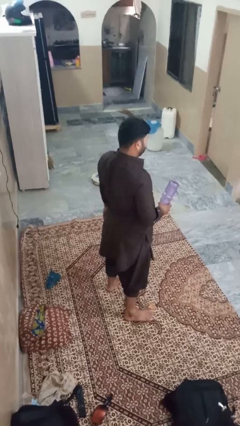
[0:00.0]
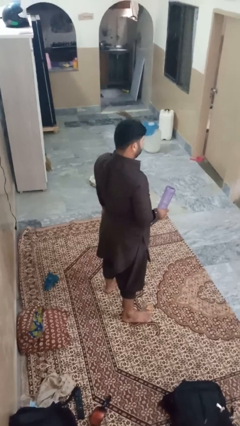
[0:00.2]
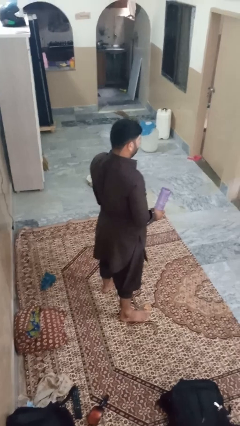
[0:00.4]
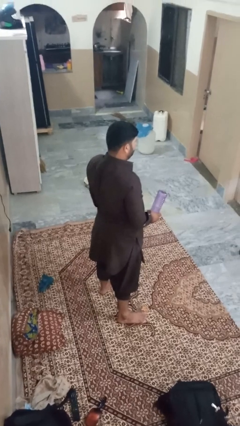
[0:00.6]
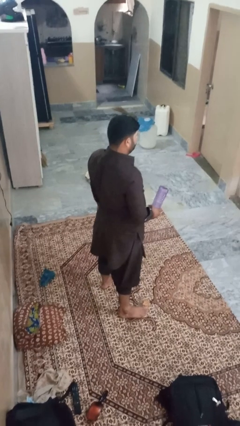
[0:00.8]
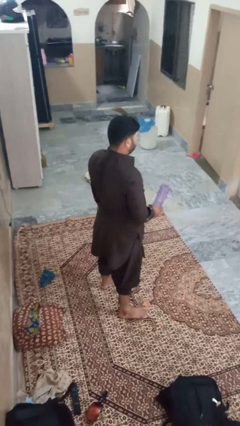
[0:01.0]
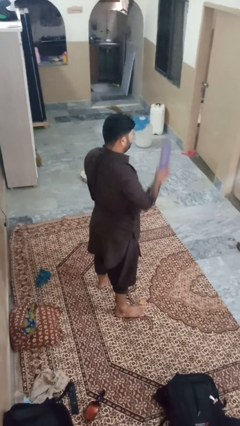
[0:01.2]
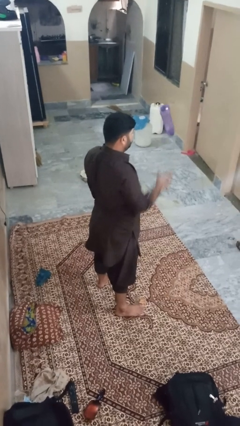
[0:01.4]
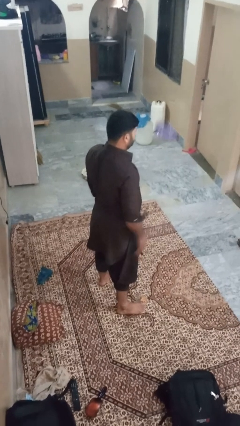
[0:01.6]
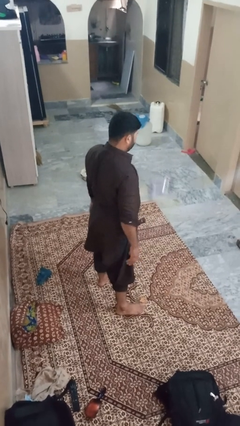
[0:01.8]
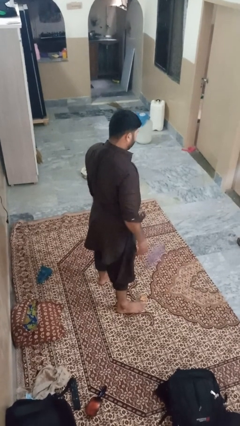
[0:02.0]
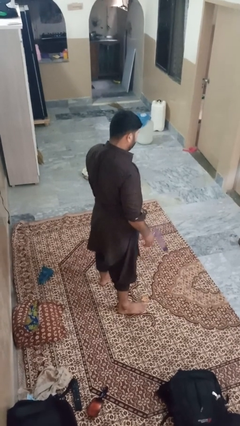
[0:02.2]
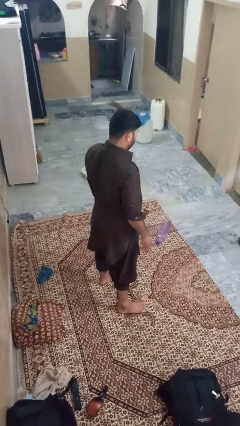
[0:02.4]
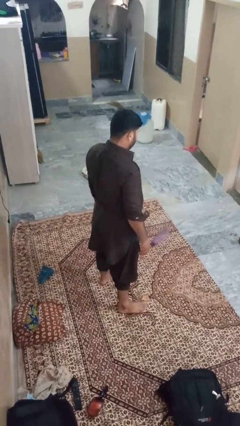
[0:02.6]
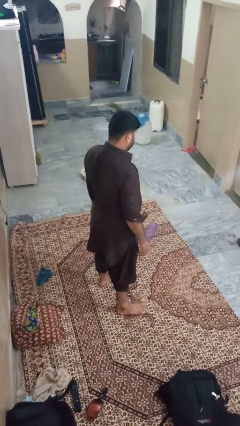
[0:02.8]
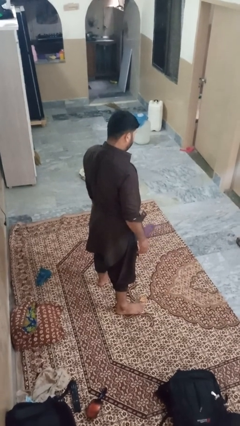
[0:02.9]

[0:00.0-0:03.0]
person throws object into air

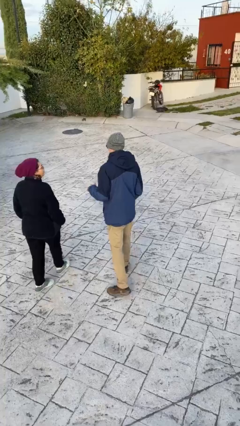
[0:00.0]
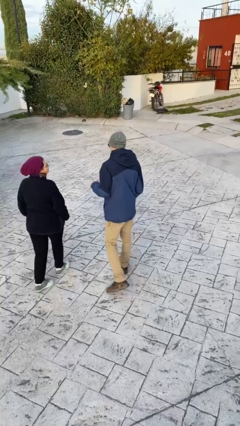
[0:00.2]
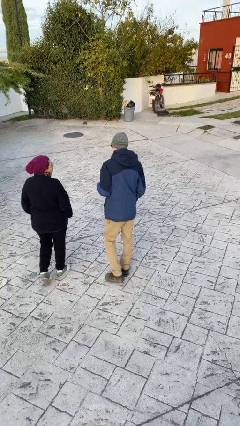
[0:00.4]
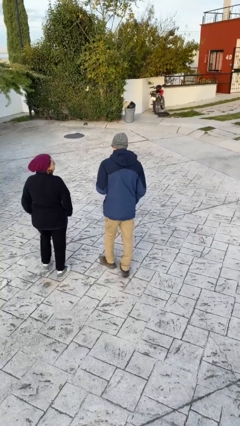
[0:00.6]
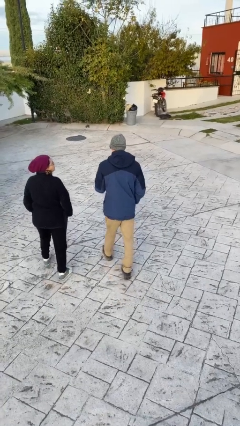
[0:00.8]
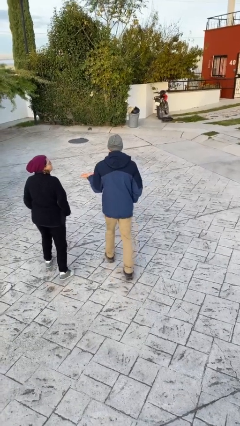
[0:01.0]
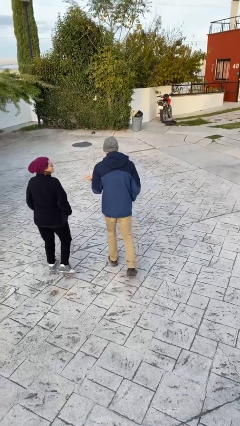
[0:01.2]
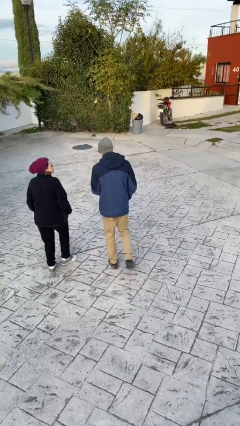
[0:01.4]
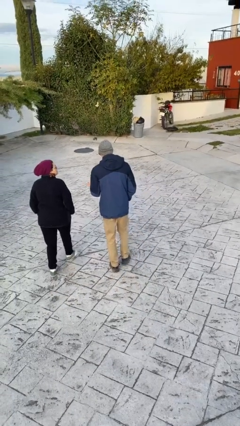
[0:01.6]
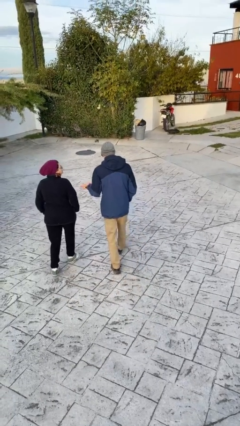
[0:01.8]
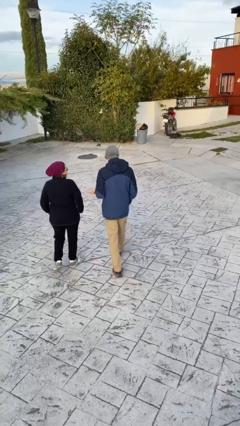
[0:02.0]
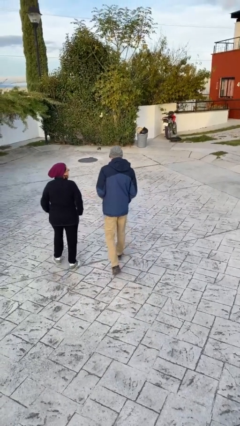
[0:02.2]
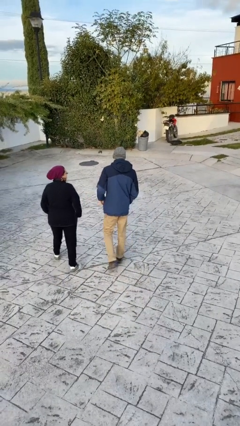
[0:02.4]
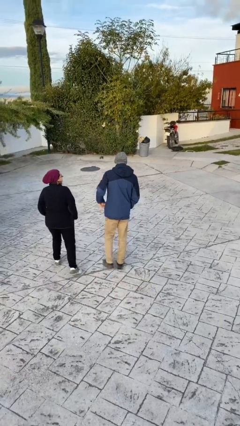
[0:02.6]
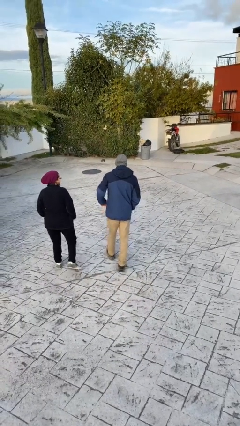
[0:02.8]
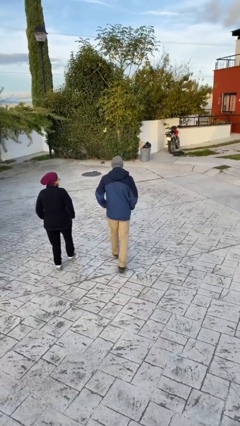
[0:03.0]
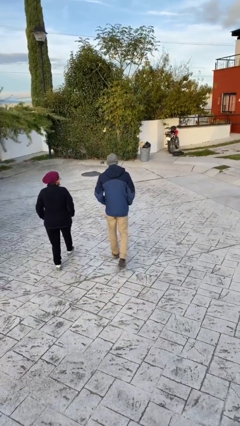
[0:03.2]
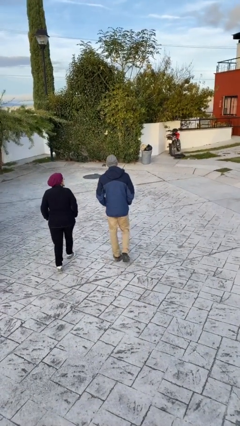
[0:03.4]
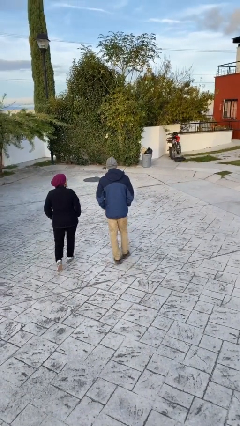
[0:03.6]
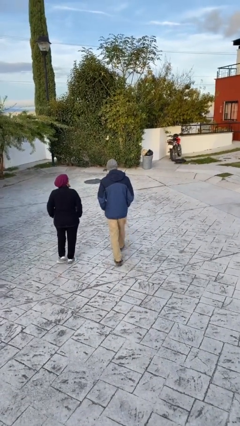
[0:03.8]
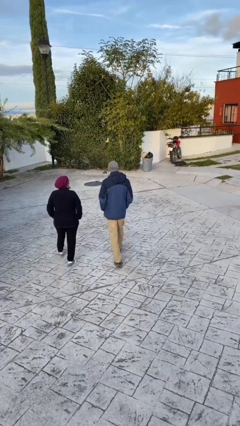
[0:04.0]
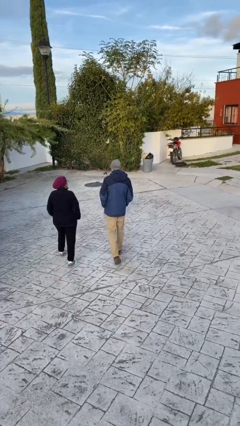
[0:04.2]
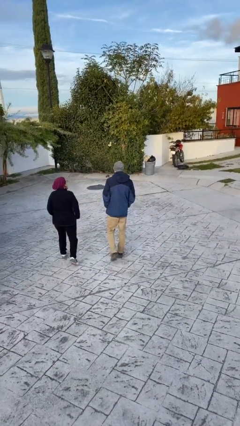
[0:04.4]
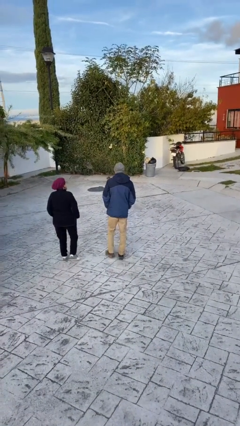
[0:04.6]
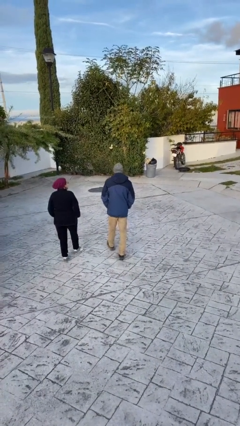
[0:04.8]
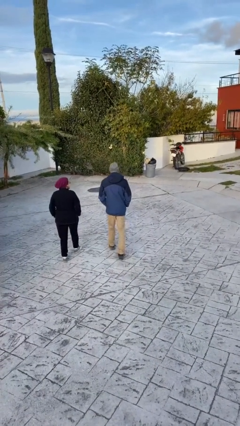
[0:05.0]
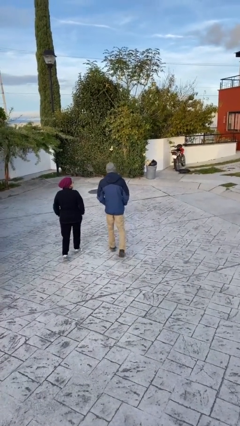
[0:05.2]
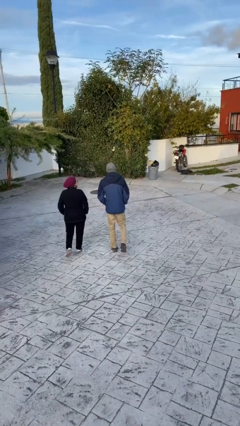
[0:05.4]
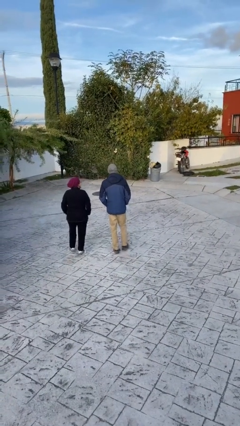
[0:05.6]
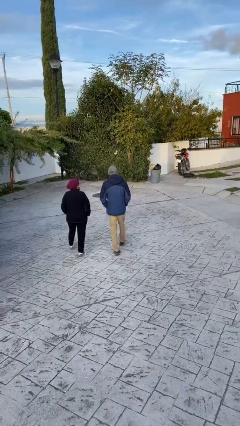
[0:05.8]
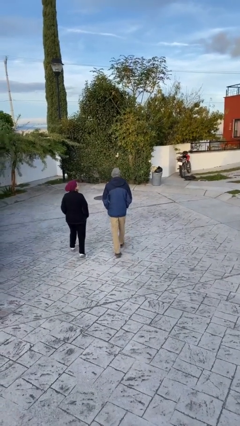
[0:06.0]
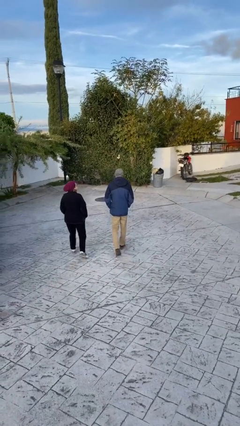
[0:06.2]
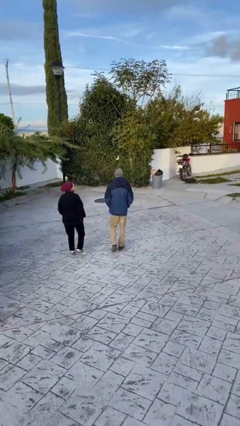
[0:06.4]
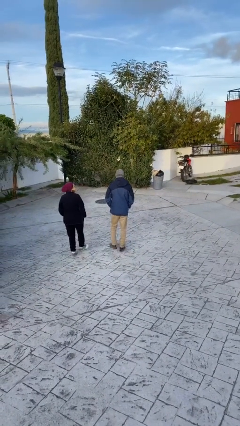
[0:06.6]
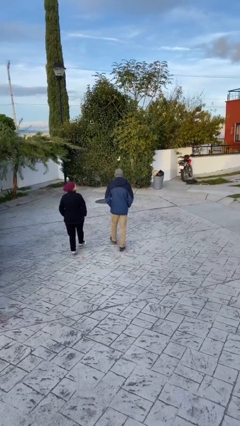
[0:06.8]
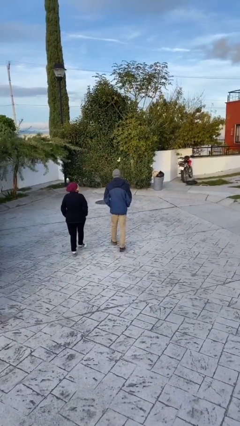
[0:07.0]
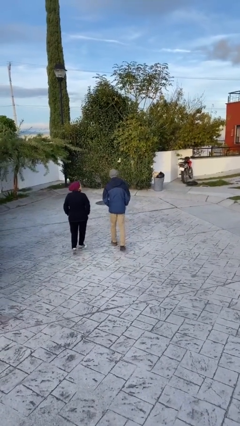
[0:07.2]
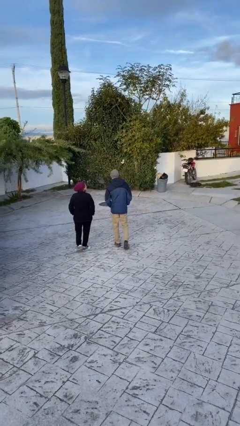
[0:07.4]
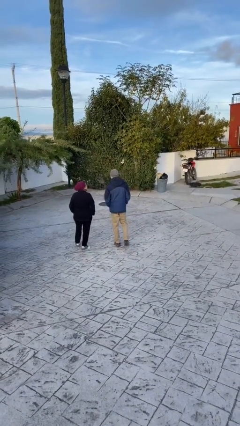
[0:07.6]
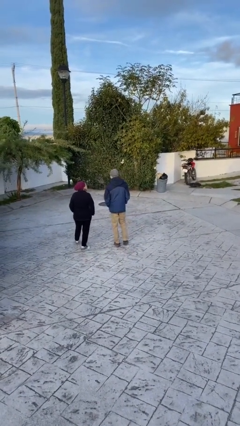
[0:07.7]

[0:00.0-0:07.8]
person talks to person

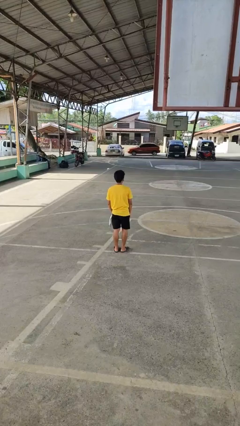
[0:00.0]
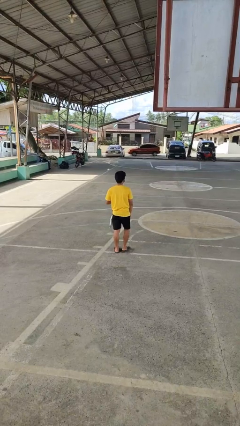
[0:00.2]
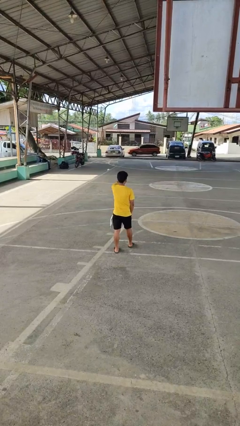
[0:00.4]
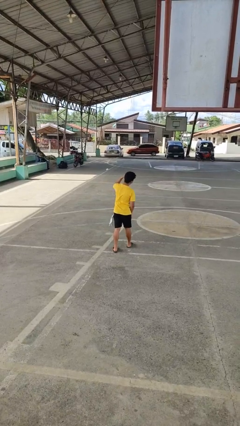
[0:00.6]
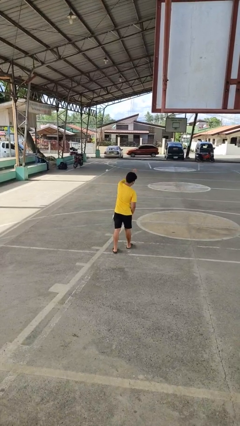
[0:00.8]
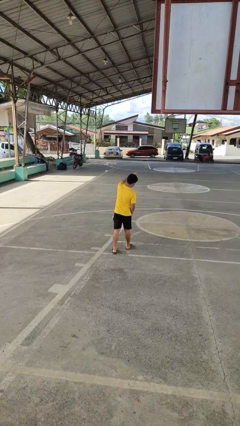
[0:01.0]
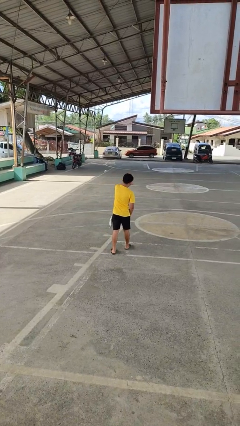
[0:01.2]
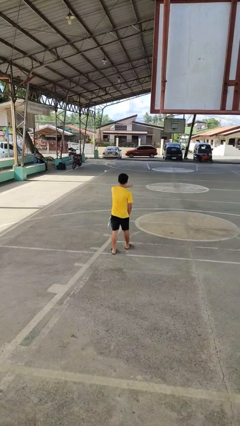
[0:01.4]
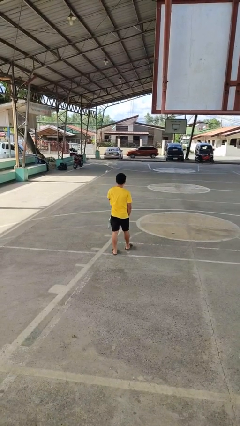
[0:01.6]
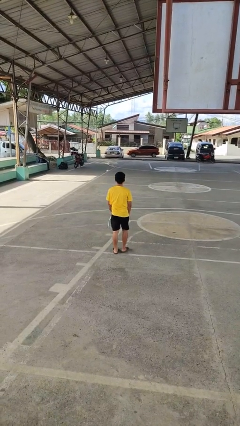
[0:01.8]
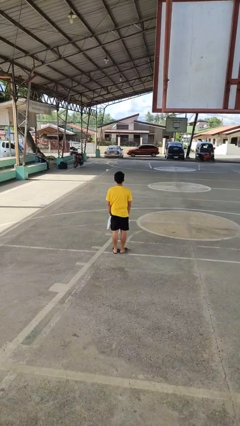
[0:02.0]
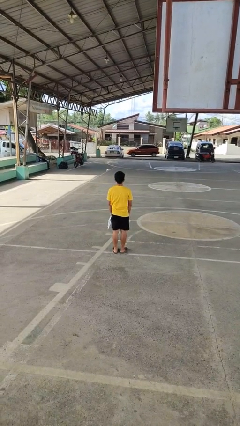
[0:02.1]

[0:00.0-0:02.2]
person punches

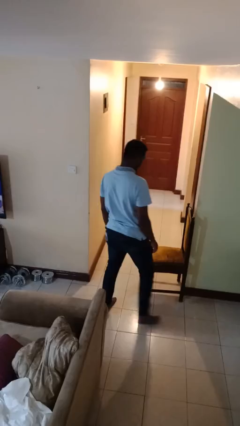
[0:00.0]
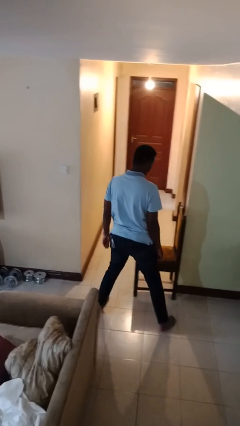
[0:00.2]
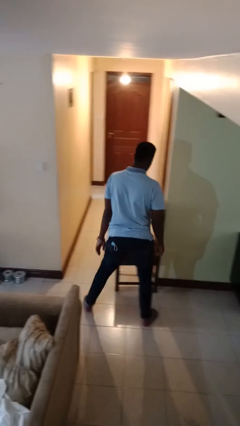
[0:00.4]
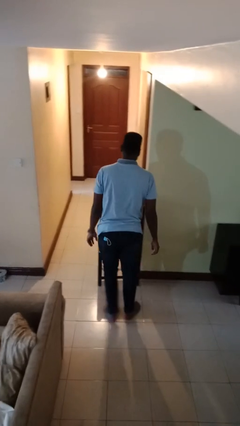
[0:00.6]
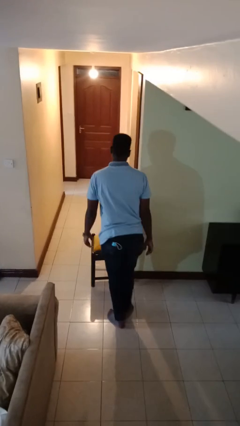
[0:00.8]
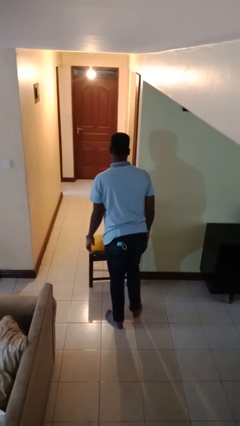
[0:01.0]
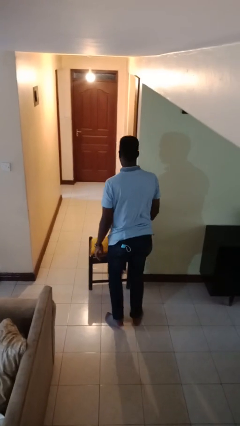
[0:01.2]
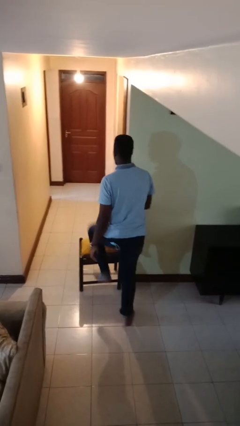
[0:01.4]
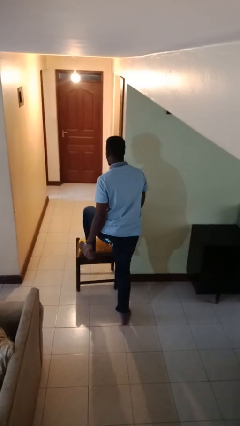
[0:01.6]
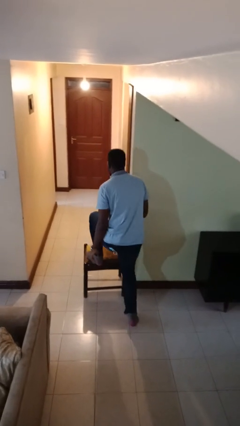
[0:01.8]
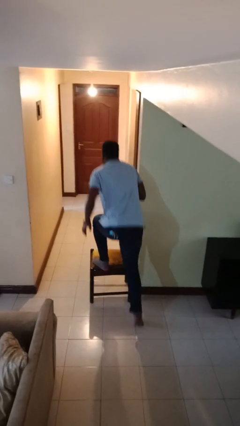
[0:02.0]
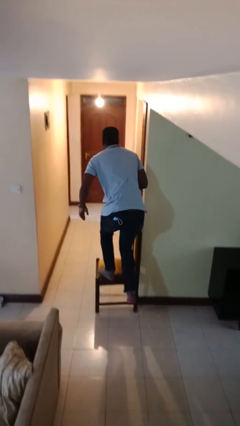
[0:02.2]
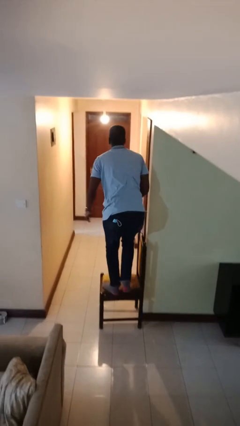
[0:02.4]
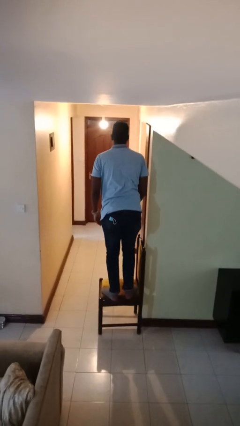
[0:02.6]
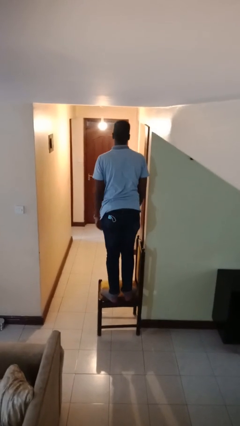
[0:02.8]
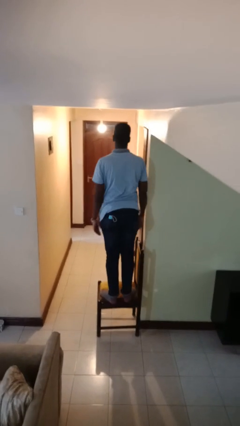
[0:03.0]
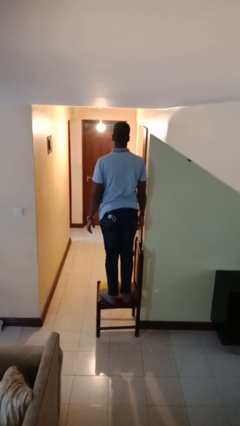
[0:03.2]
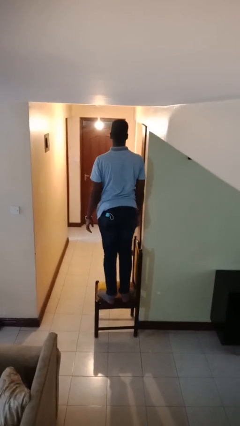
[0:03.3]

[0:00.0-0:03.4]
person climbs on chair

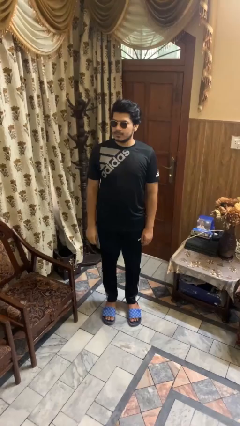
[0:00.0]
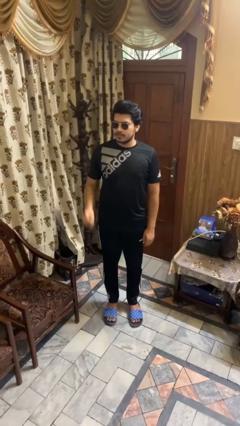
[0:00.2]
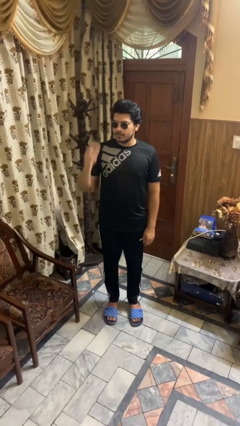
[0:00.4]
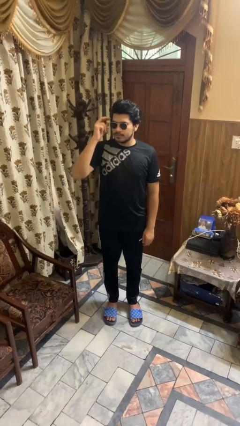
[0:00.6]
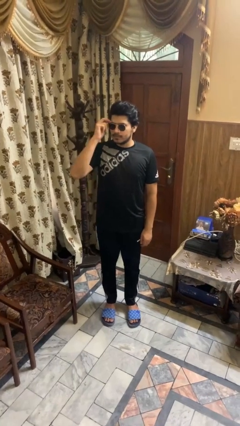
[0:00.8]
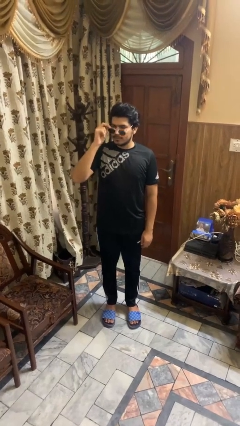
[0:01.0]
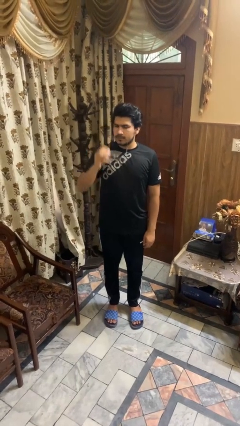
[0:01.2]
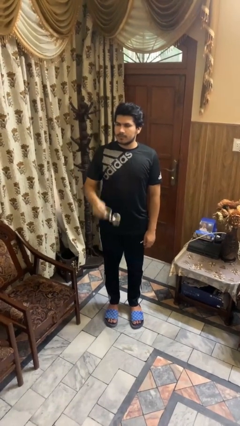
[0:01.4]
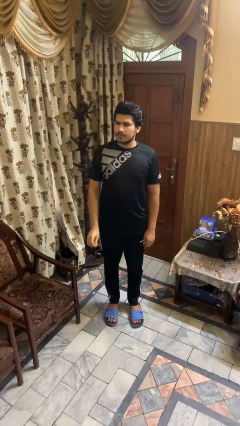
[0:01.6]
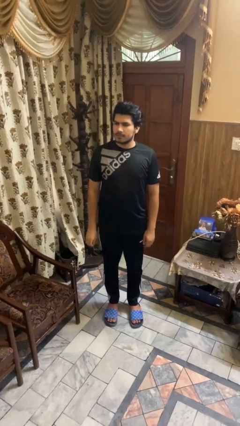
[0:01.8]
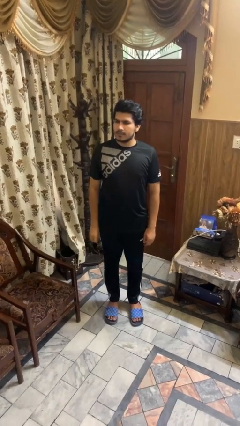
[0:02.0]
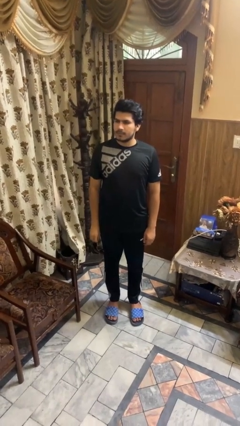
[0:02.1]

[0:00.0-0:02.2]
person takes off sunglasses
